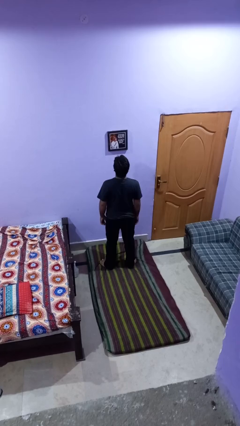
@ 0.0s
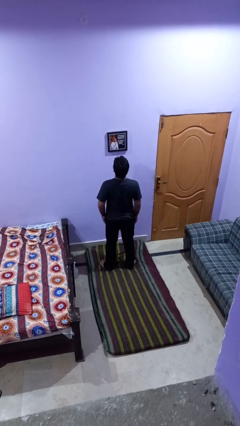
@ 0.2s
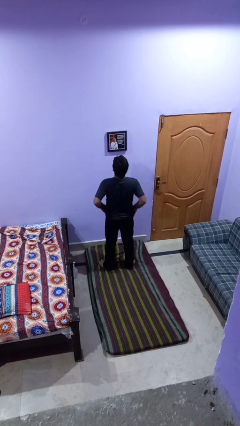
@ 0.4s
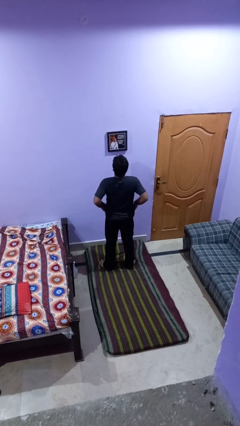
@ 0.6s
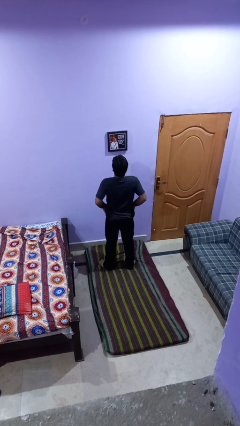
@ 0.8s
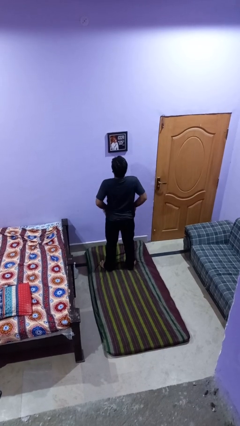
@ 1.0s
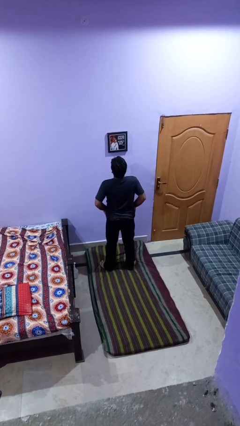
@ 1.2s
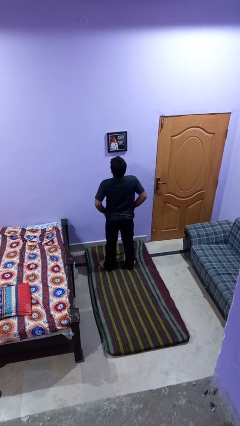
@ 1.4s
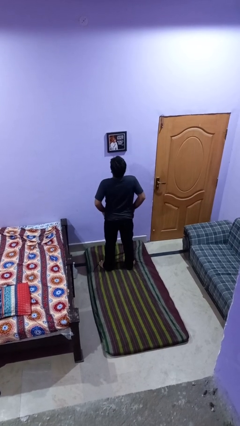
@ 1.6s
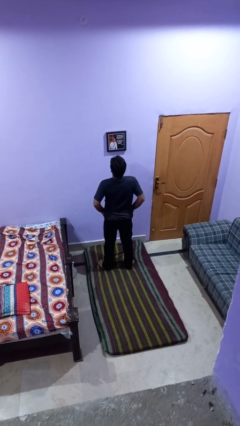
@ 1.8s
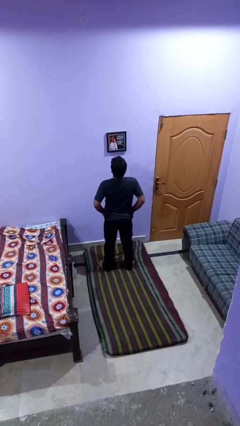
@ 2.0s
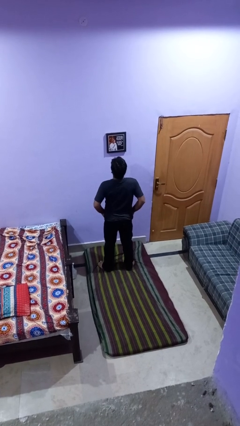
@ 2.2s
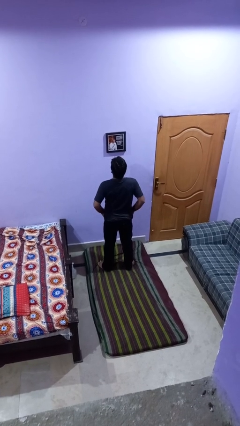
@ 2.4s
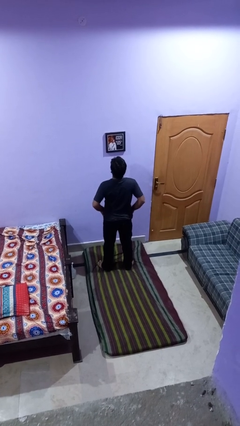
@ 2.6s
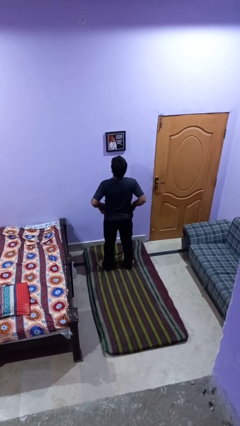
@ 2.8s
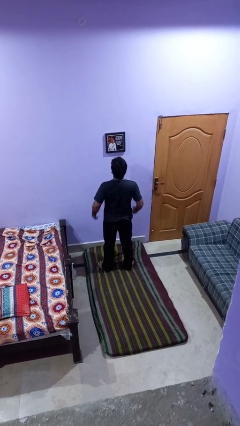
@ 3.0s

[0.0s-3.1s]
person puts hands in back pockets

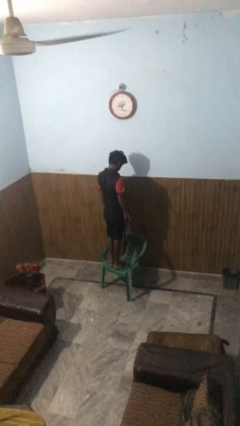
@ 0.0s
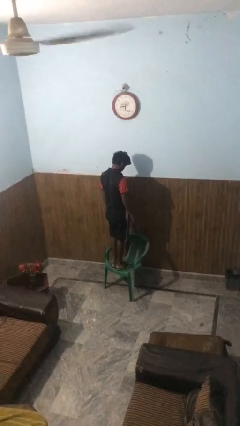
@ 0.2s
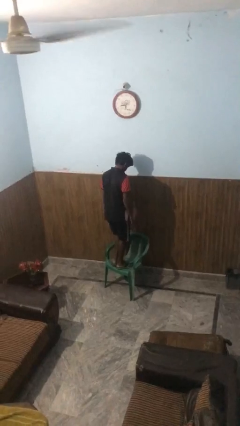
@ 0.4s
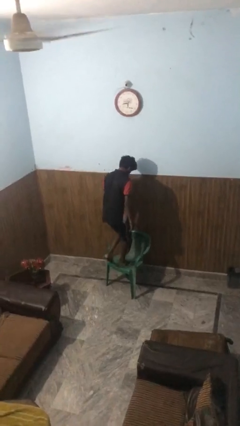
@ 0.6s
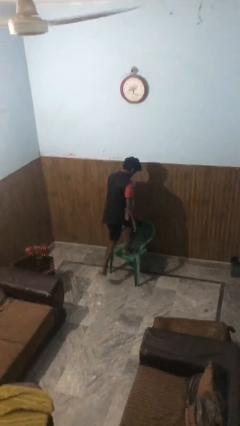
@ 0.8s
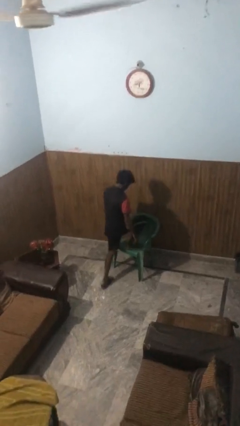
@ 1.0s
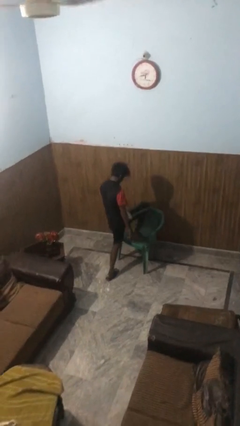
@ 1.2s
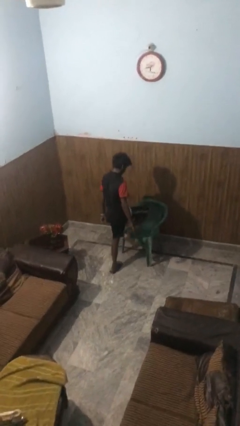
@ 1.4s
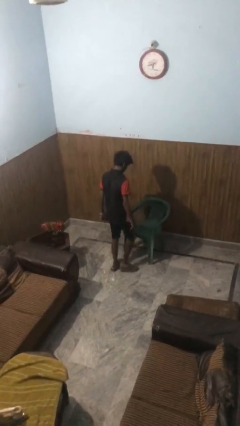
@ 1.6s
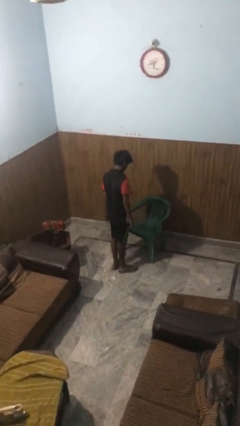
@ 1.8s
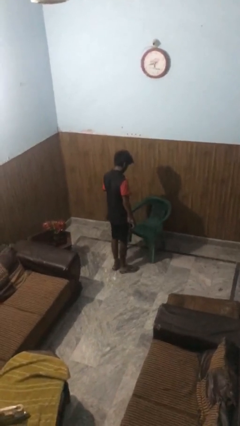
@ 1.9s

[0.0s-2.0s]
person climbs off chair

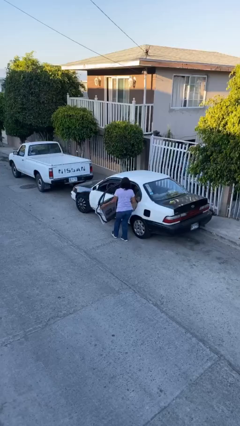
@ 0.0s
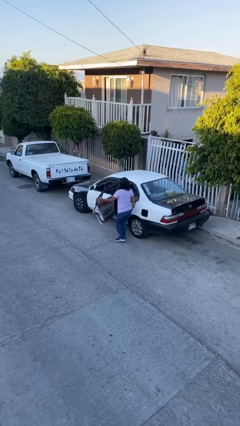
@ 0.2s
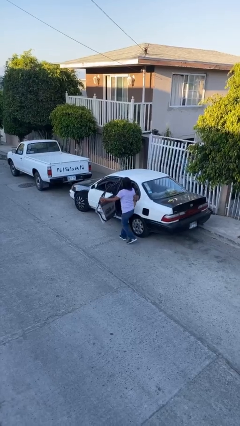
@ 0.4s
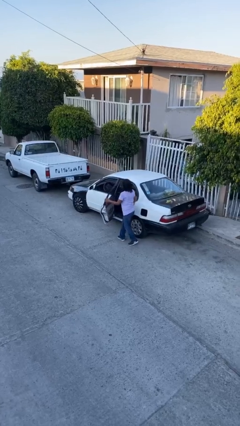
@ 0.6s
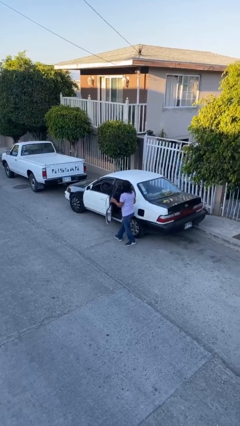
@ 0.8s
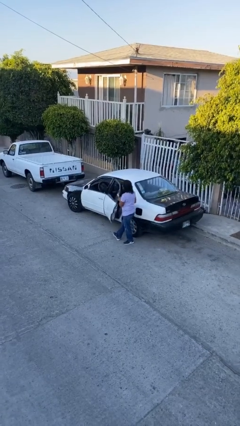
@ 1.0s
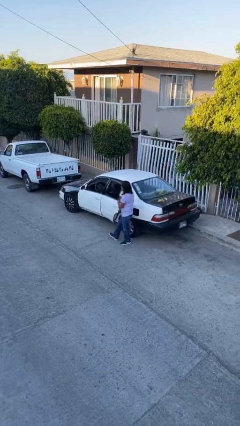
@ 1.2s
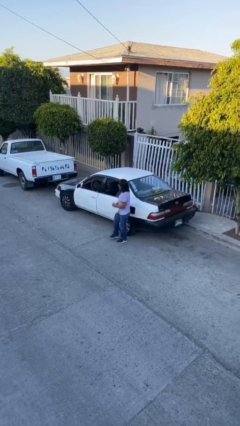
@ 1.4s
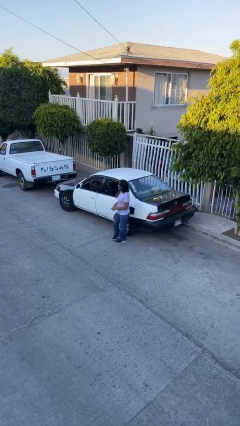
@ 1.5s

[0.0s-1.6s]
person closes car door

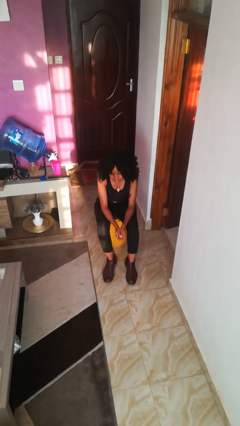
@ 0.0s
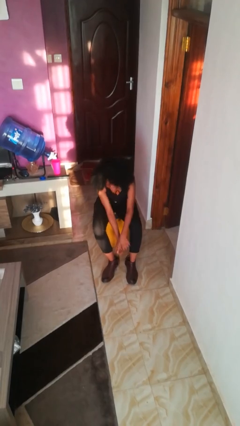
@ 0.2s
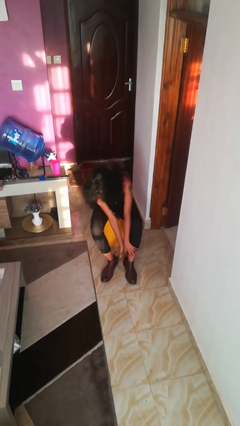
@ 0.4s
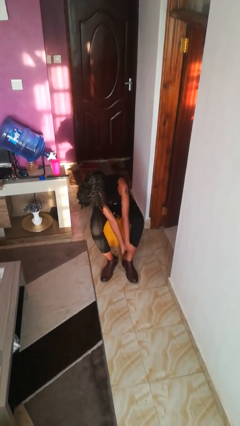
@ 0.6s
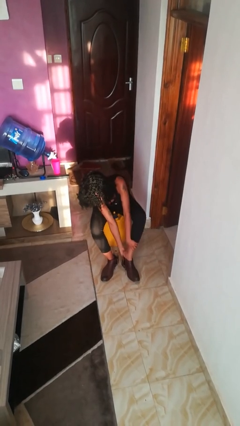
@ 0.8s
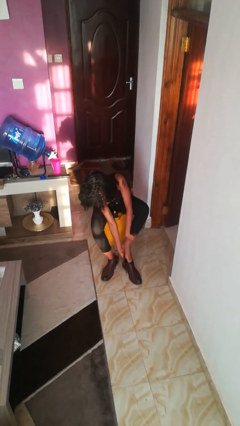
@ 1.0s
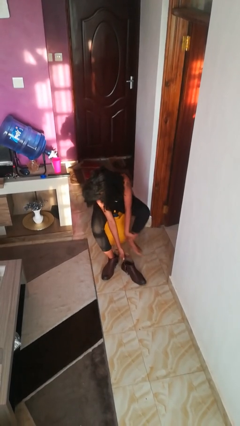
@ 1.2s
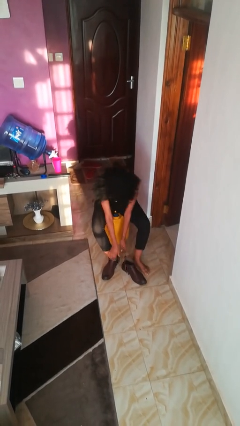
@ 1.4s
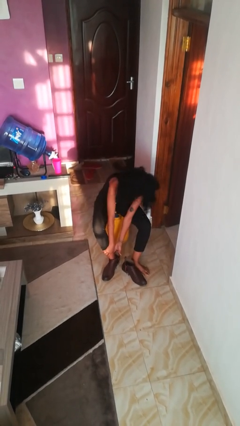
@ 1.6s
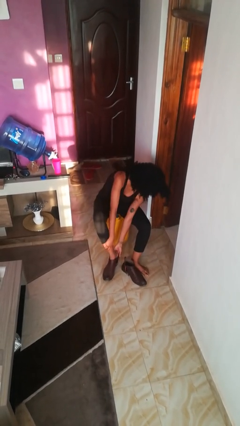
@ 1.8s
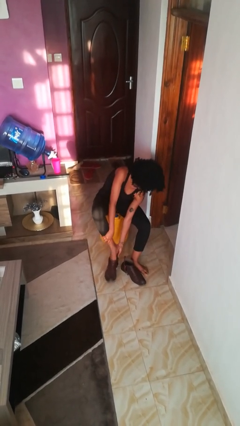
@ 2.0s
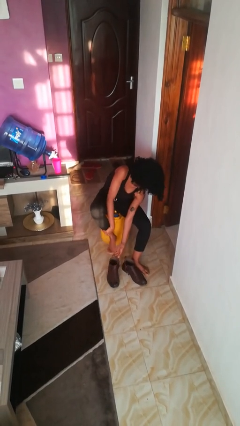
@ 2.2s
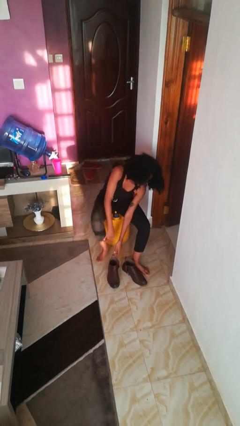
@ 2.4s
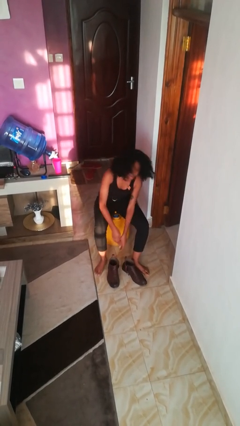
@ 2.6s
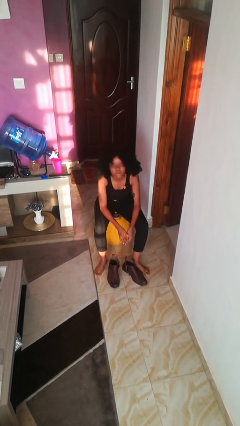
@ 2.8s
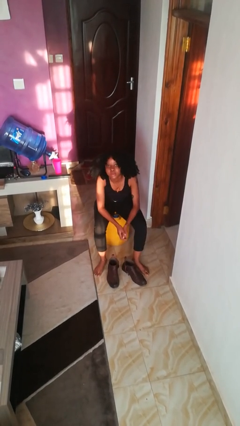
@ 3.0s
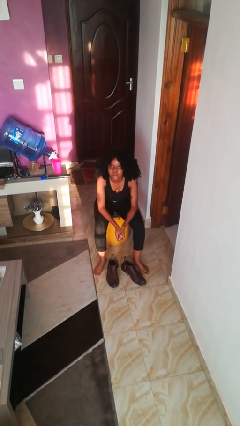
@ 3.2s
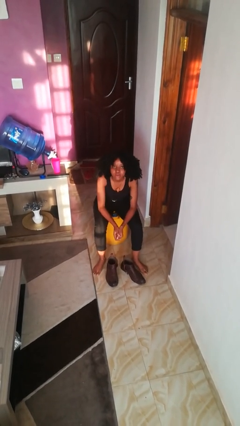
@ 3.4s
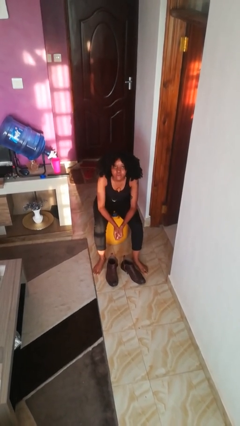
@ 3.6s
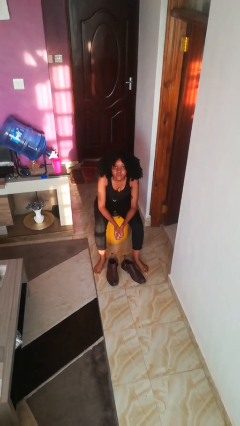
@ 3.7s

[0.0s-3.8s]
person takes off boots

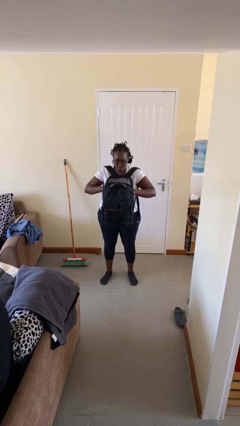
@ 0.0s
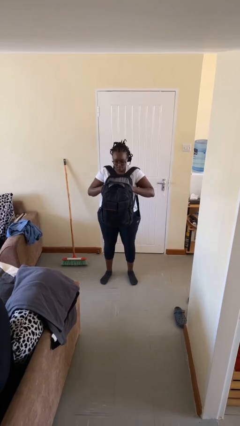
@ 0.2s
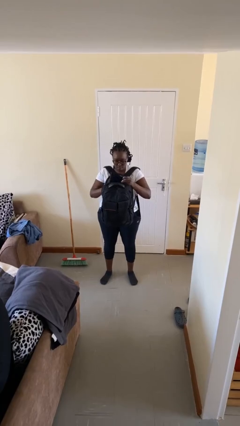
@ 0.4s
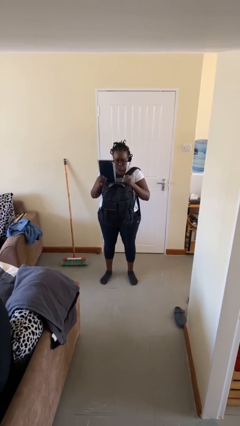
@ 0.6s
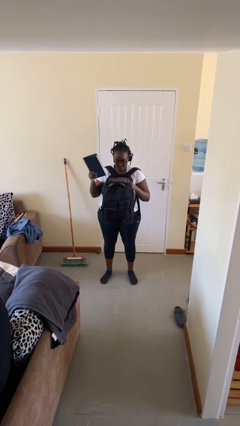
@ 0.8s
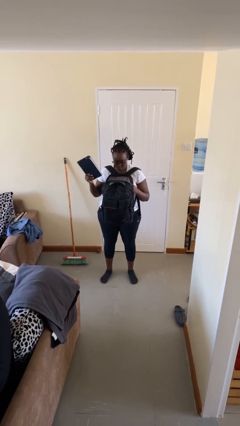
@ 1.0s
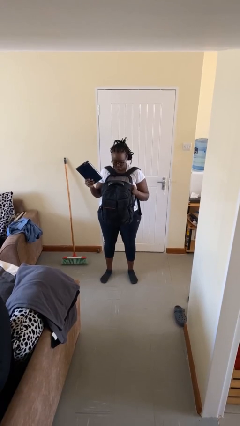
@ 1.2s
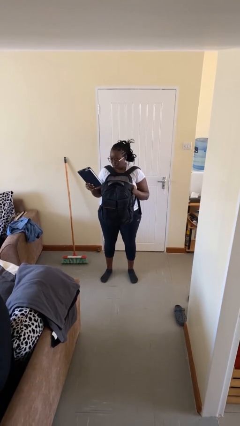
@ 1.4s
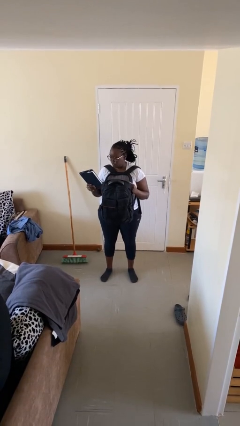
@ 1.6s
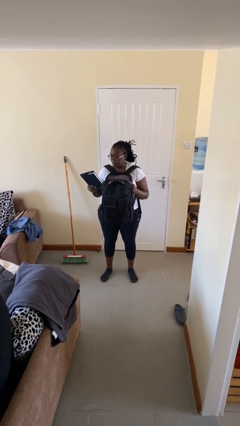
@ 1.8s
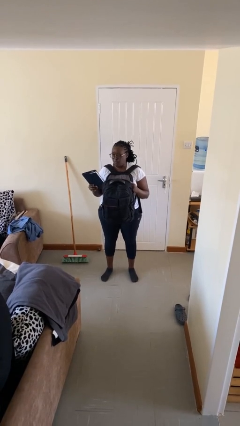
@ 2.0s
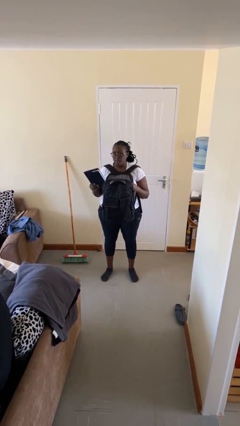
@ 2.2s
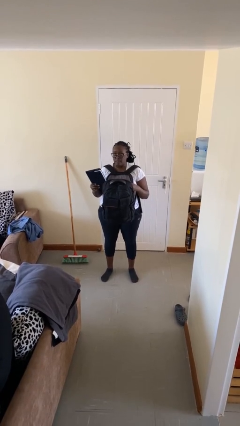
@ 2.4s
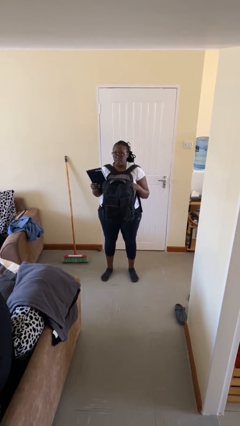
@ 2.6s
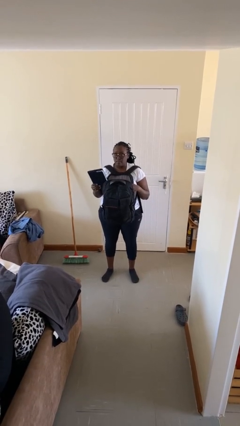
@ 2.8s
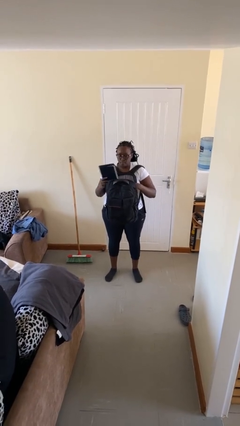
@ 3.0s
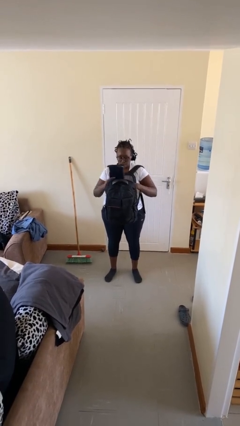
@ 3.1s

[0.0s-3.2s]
person takes object from backpack

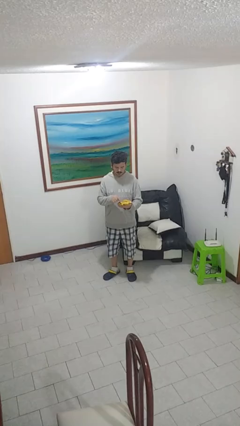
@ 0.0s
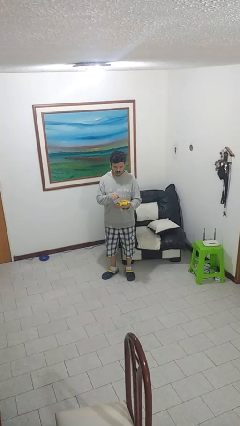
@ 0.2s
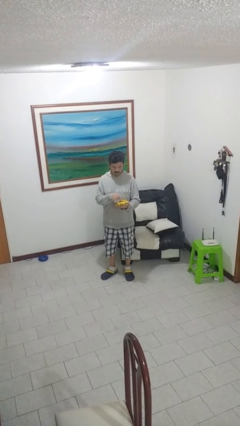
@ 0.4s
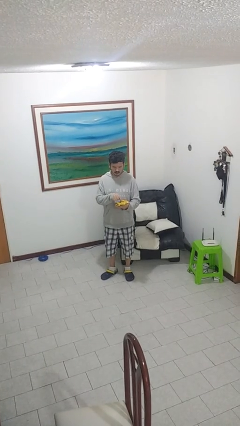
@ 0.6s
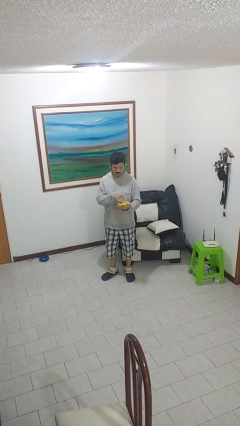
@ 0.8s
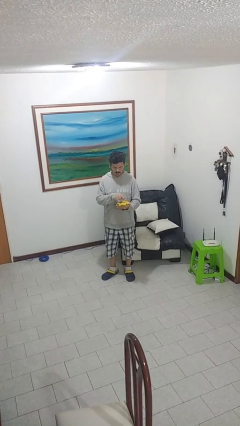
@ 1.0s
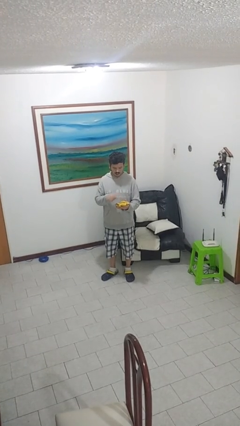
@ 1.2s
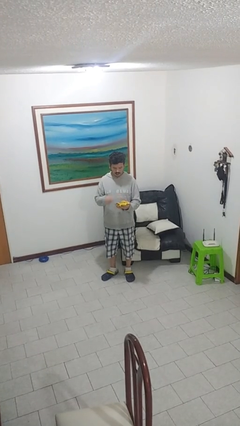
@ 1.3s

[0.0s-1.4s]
person taps object with finger

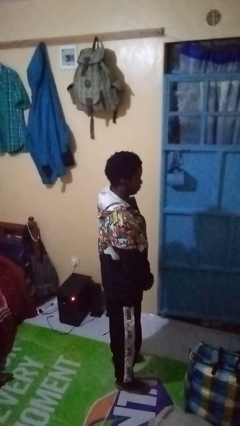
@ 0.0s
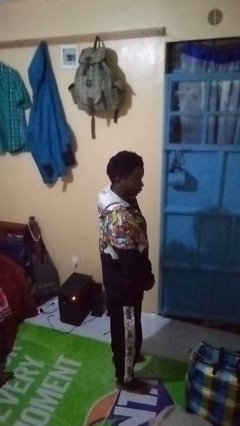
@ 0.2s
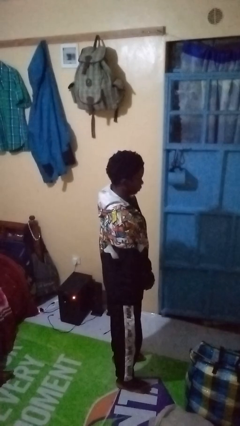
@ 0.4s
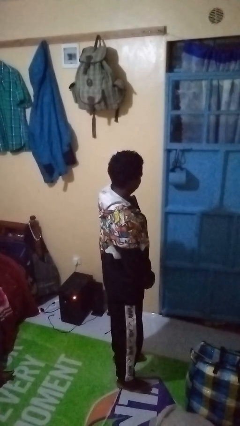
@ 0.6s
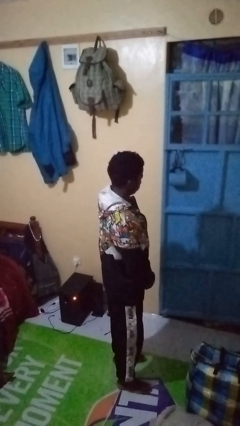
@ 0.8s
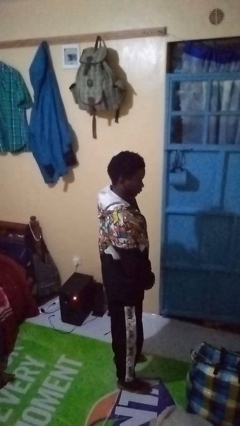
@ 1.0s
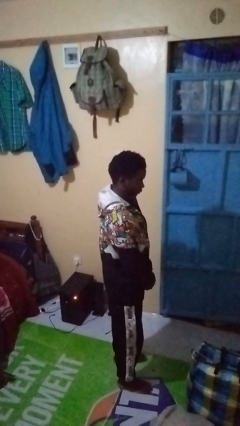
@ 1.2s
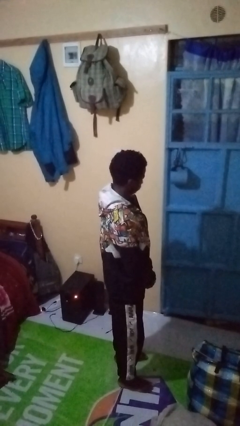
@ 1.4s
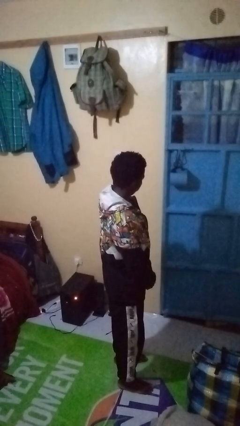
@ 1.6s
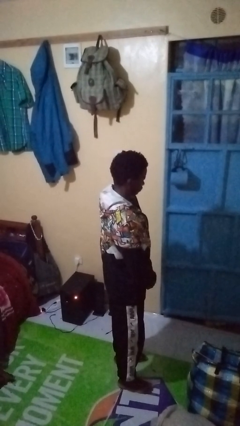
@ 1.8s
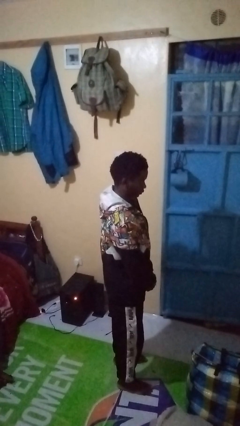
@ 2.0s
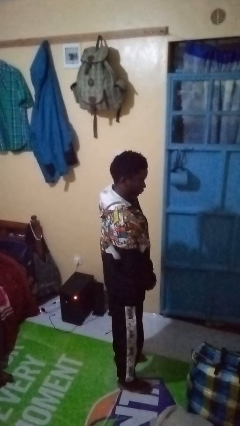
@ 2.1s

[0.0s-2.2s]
person shakes head

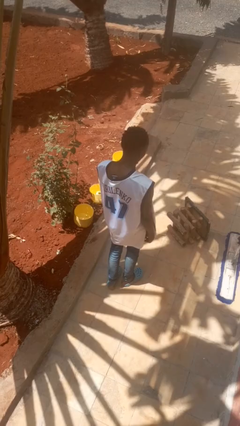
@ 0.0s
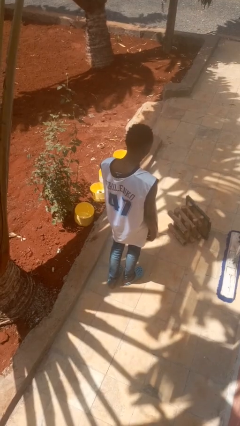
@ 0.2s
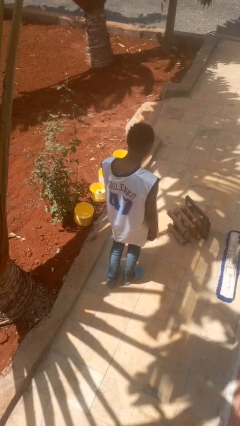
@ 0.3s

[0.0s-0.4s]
person knocks over furniture
